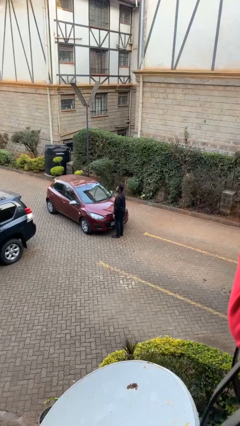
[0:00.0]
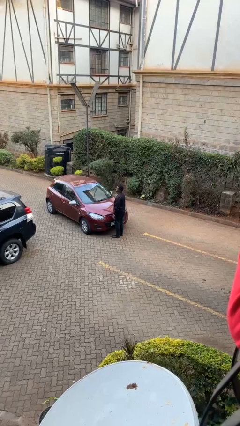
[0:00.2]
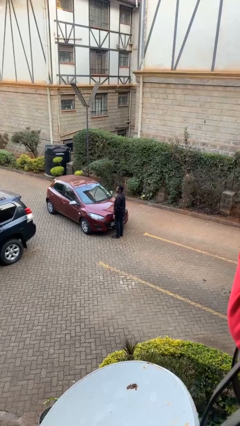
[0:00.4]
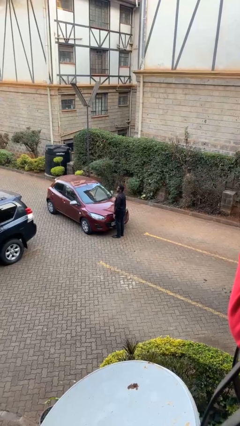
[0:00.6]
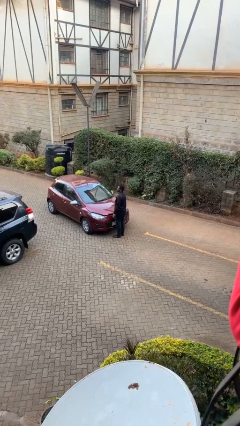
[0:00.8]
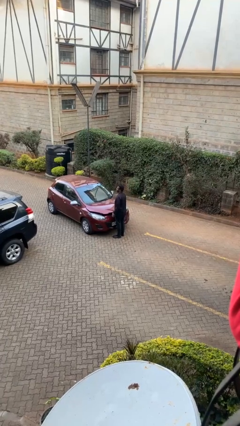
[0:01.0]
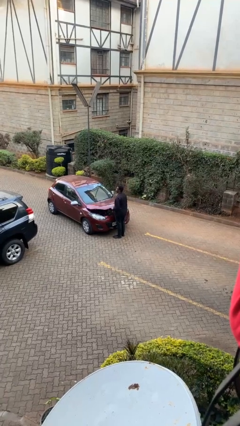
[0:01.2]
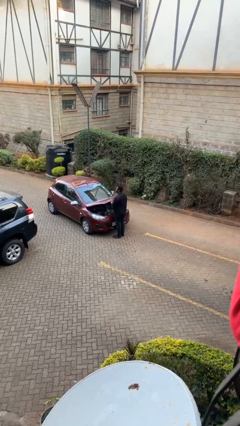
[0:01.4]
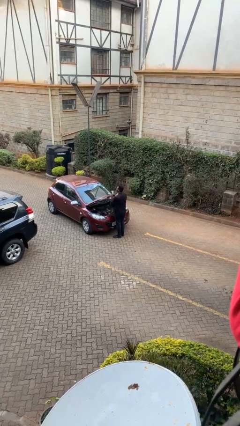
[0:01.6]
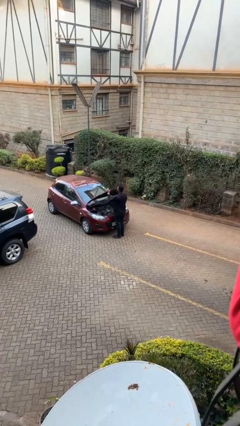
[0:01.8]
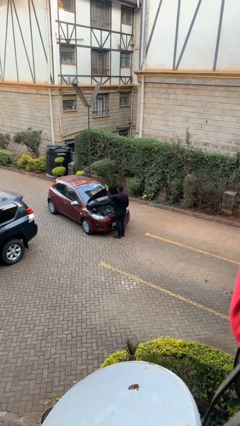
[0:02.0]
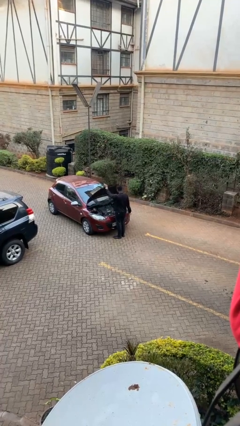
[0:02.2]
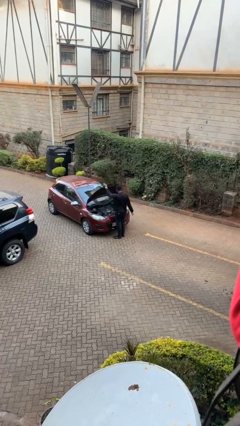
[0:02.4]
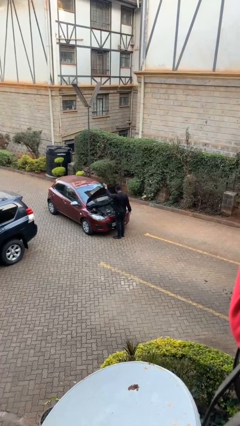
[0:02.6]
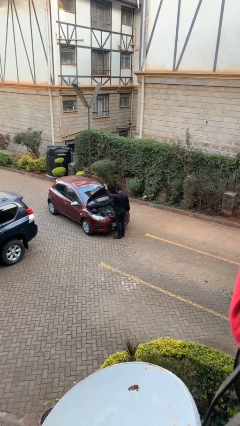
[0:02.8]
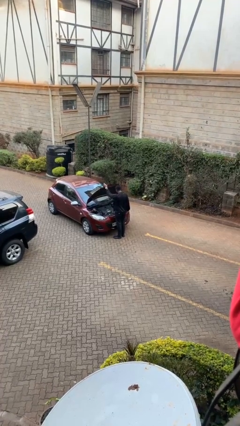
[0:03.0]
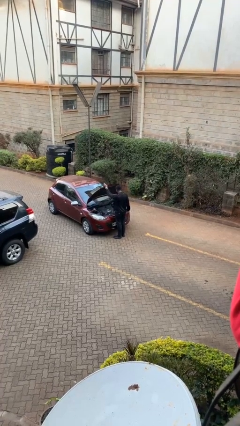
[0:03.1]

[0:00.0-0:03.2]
person opens car hood

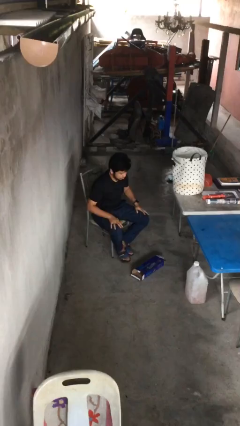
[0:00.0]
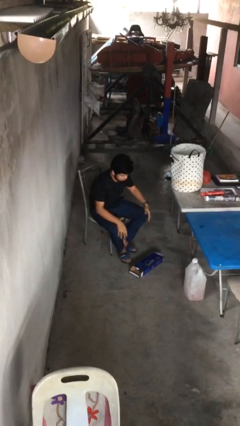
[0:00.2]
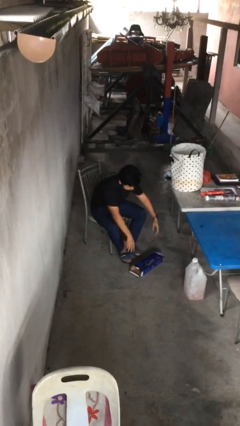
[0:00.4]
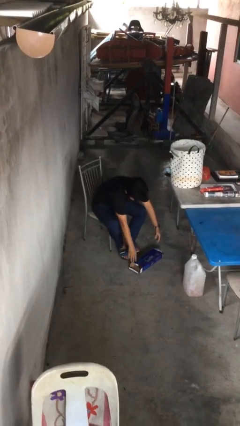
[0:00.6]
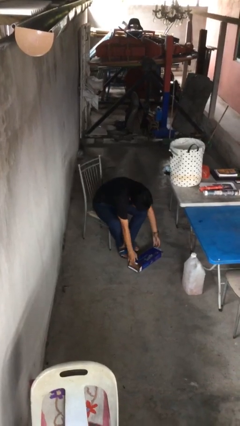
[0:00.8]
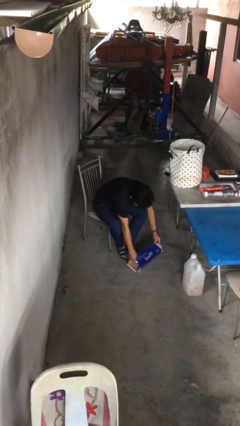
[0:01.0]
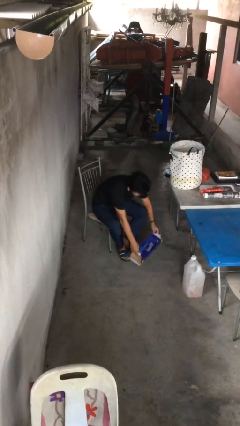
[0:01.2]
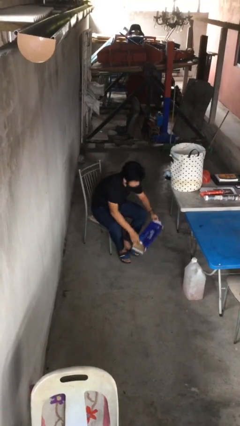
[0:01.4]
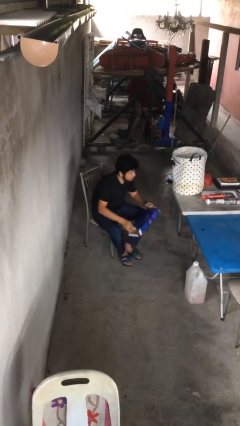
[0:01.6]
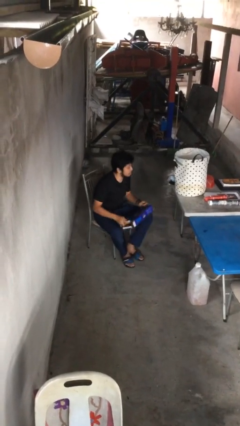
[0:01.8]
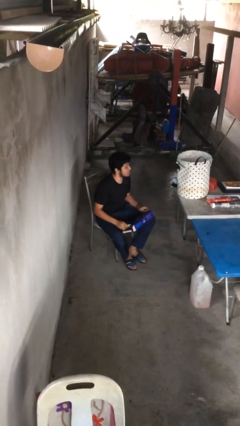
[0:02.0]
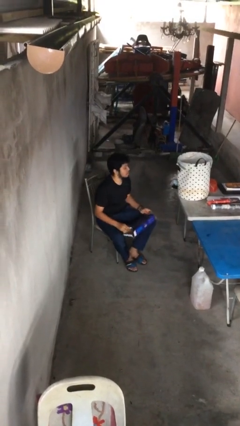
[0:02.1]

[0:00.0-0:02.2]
person picks up object from floor

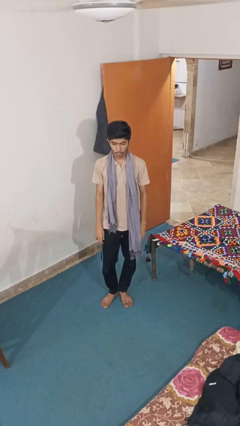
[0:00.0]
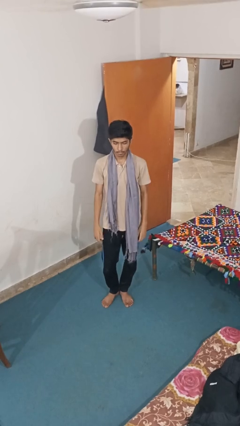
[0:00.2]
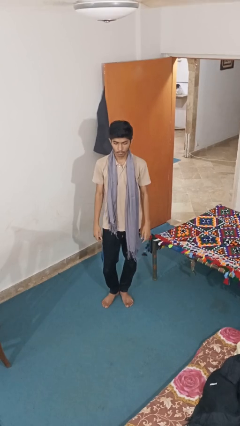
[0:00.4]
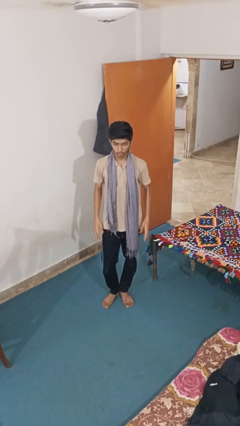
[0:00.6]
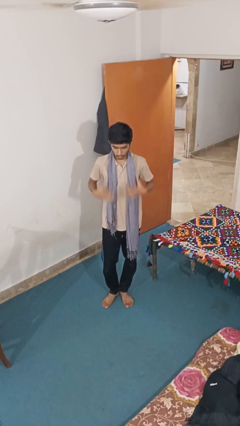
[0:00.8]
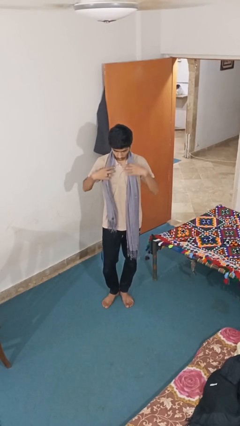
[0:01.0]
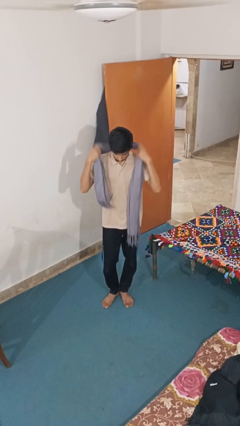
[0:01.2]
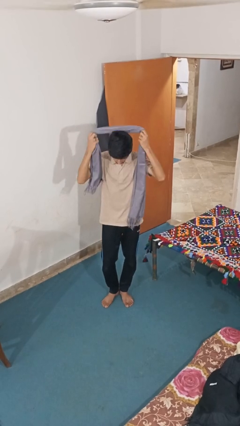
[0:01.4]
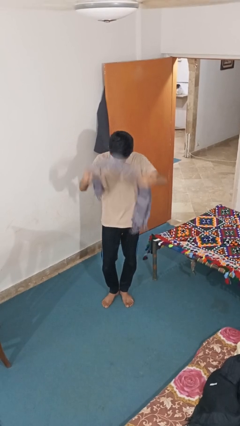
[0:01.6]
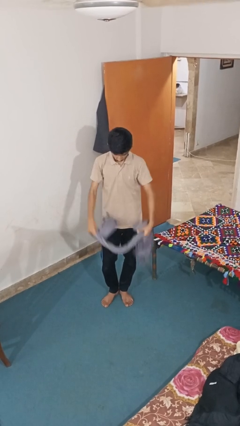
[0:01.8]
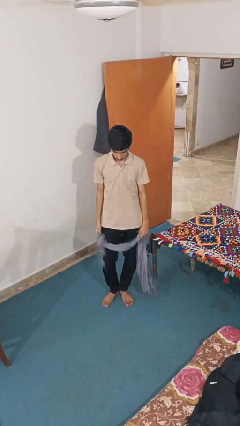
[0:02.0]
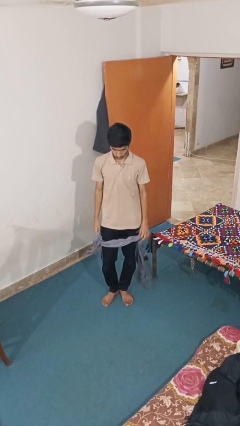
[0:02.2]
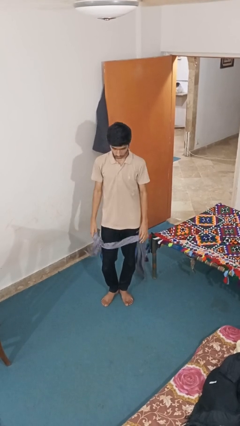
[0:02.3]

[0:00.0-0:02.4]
person takes off scarf

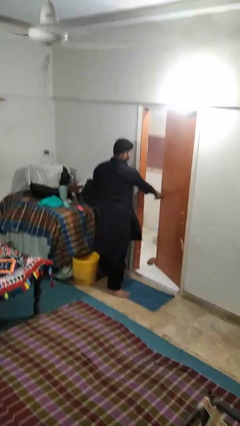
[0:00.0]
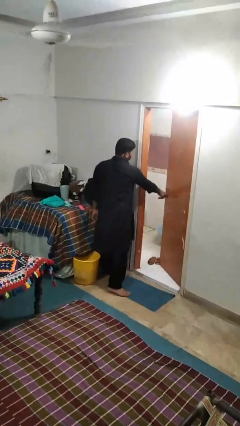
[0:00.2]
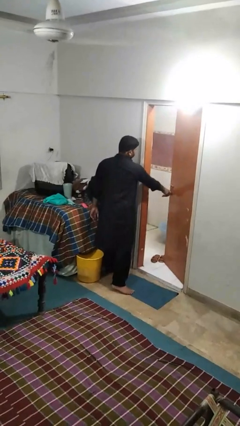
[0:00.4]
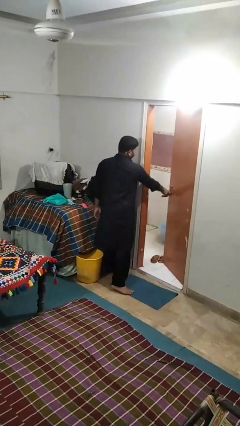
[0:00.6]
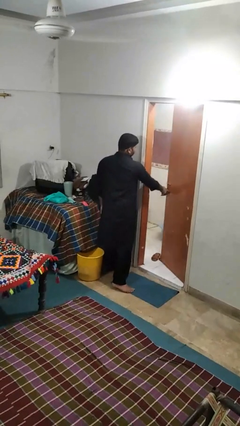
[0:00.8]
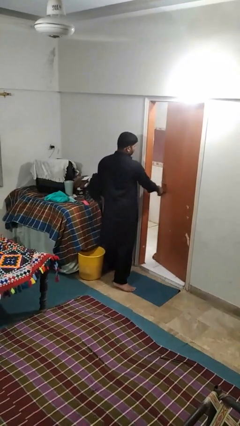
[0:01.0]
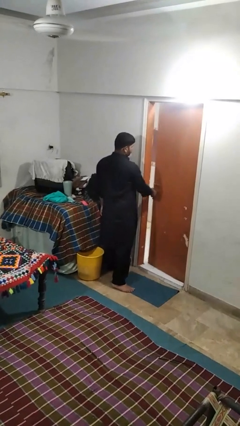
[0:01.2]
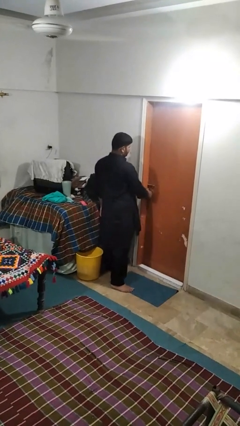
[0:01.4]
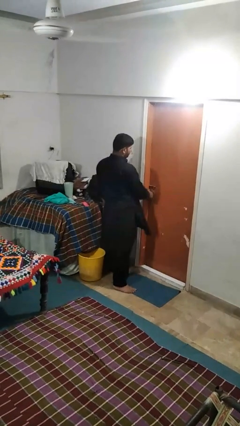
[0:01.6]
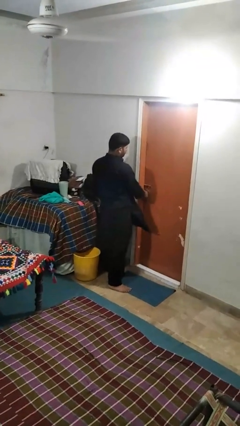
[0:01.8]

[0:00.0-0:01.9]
person closes facility door

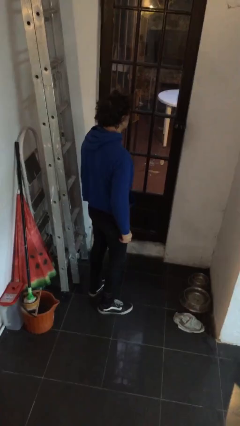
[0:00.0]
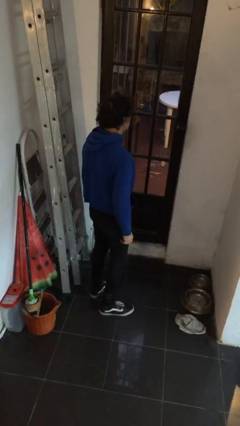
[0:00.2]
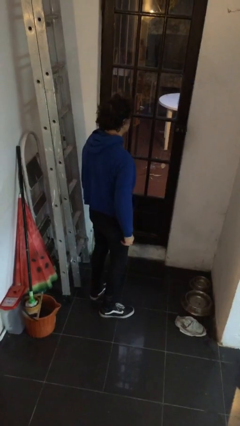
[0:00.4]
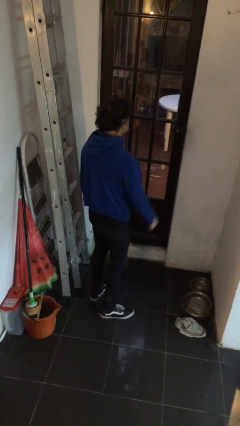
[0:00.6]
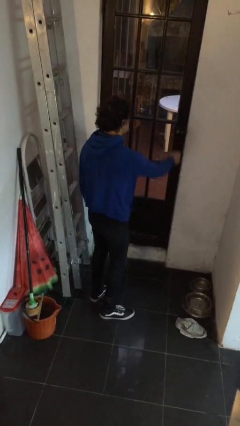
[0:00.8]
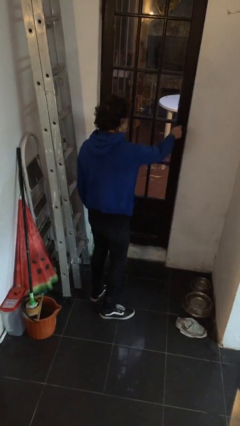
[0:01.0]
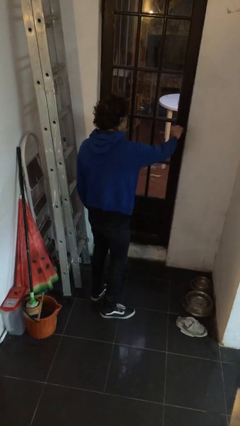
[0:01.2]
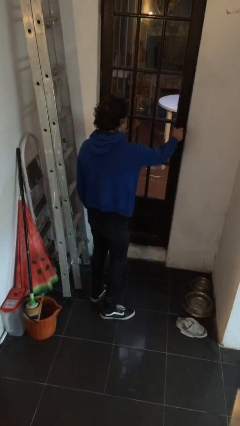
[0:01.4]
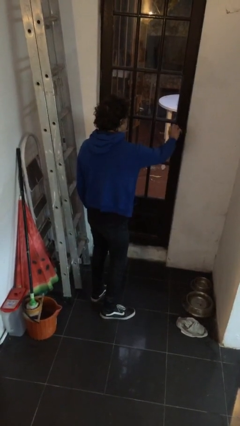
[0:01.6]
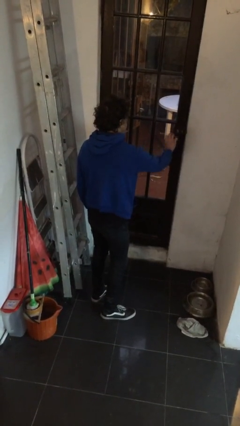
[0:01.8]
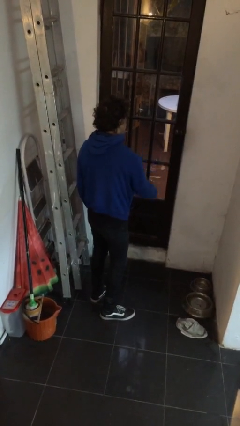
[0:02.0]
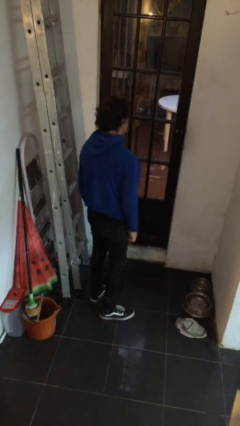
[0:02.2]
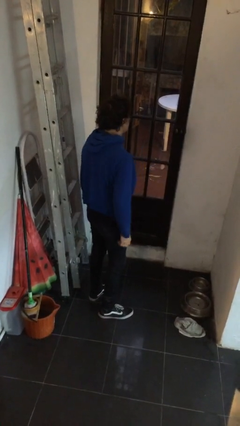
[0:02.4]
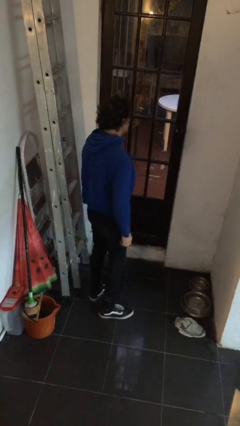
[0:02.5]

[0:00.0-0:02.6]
person unlocks door with keys

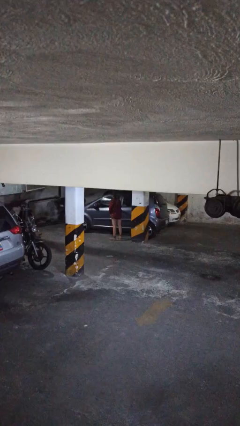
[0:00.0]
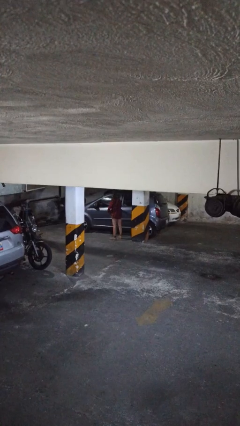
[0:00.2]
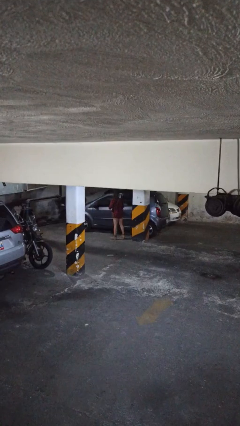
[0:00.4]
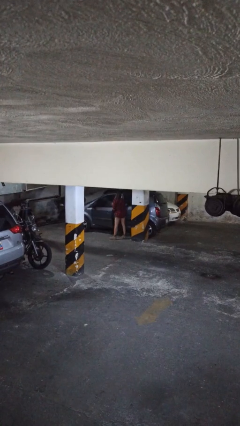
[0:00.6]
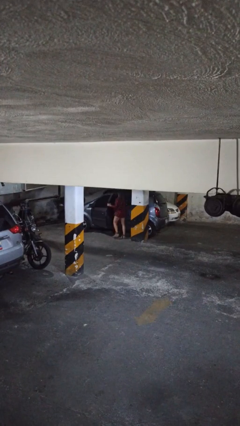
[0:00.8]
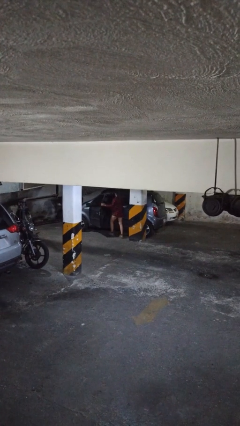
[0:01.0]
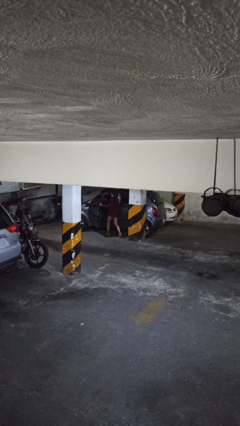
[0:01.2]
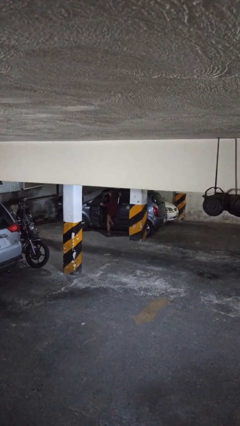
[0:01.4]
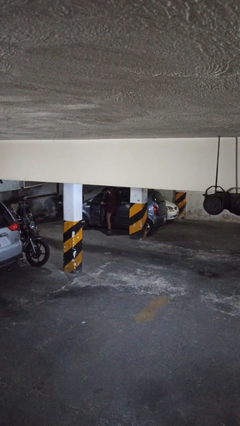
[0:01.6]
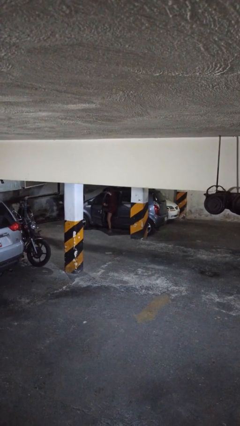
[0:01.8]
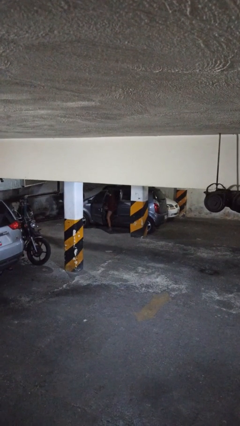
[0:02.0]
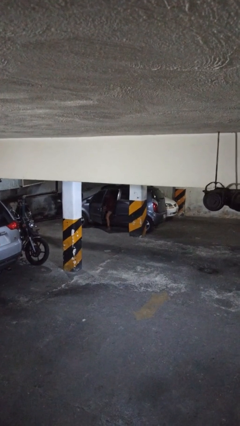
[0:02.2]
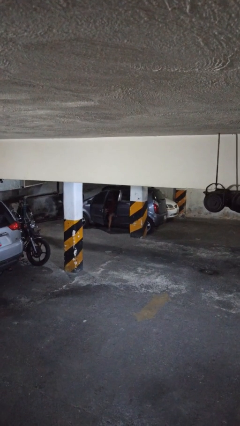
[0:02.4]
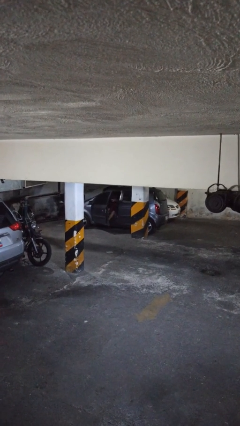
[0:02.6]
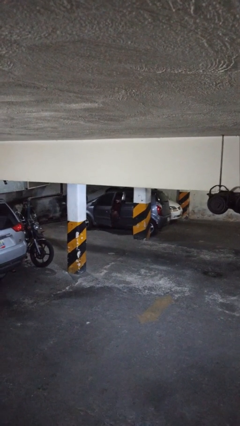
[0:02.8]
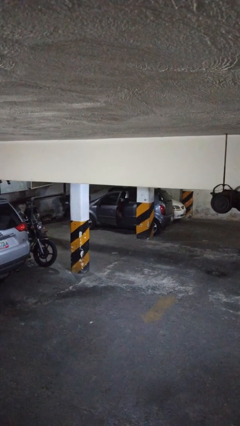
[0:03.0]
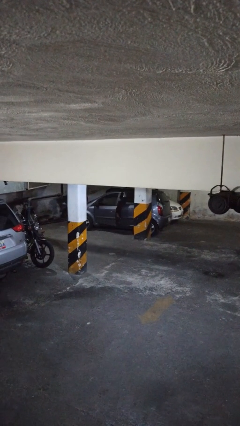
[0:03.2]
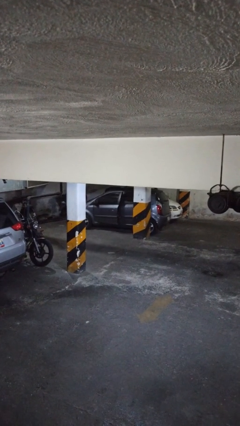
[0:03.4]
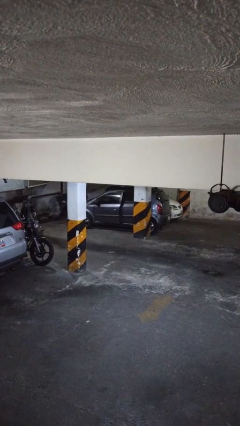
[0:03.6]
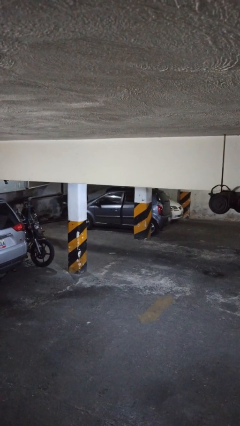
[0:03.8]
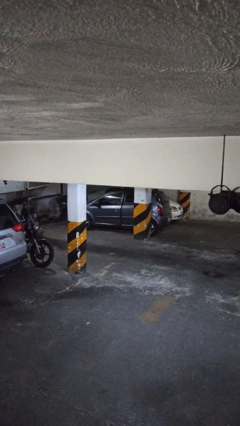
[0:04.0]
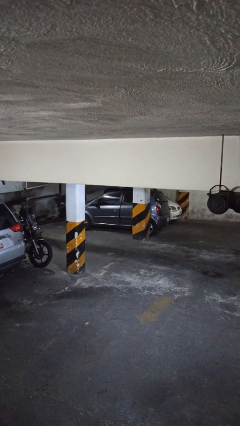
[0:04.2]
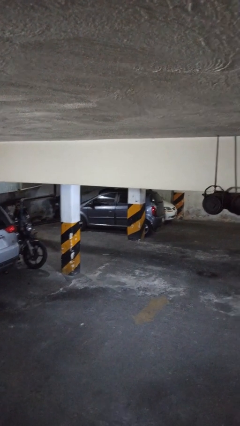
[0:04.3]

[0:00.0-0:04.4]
car picks up person

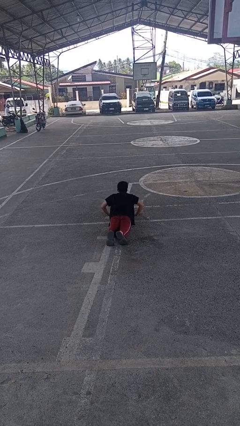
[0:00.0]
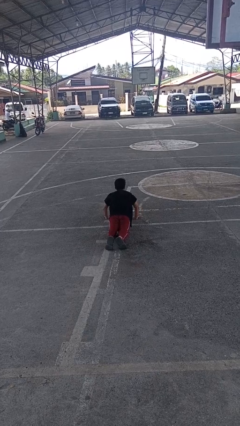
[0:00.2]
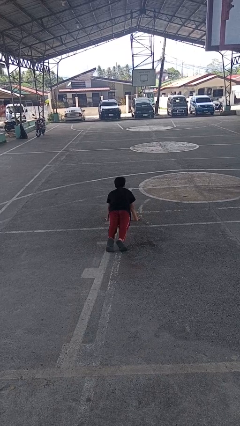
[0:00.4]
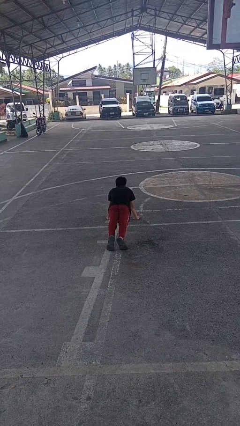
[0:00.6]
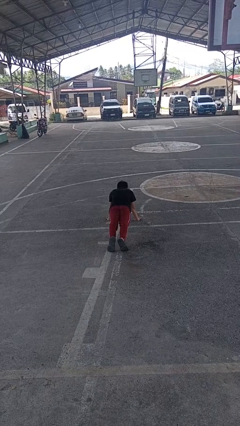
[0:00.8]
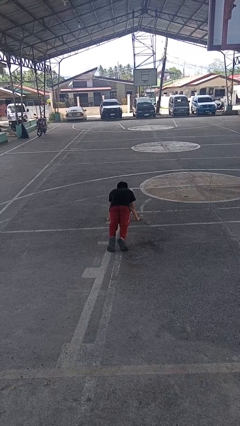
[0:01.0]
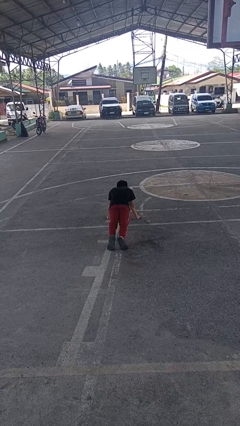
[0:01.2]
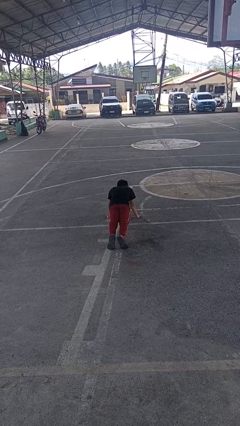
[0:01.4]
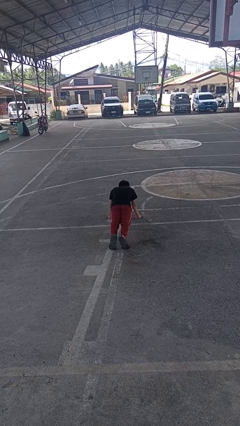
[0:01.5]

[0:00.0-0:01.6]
person exercises with pushup
